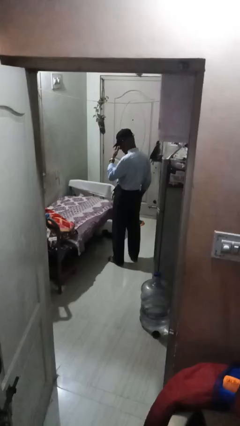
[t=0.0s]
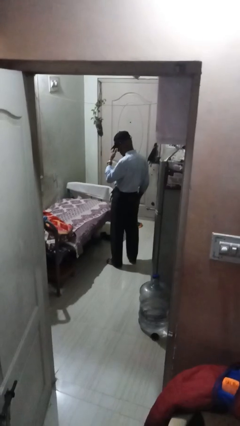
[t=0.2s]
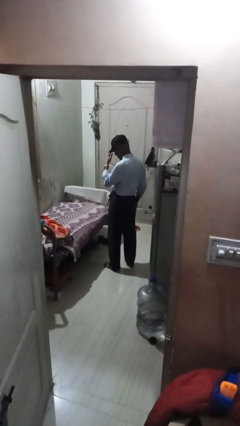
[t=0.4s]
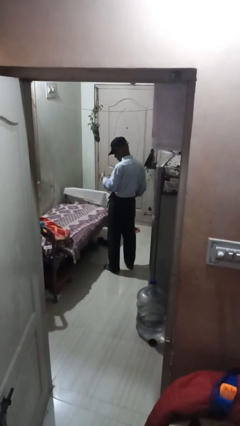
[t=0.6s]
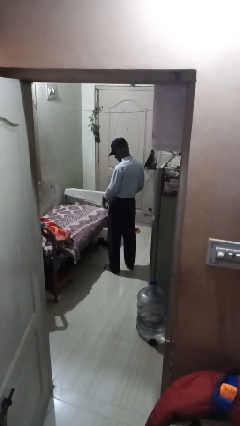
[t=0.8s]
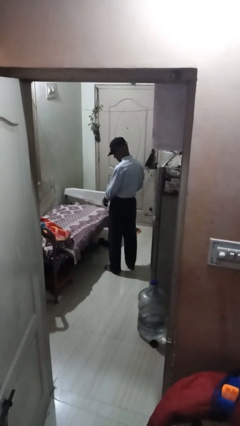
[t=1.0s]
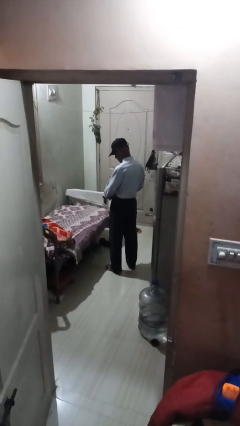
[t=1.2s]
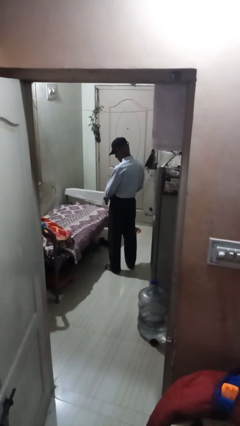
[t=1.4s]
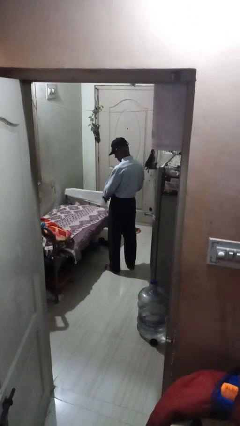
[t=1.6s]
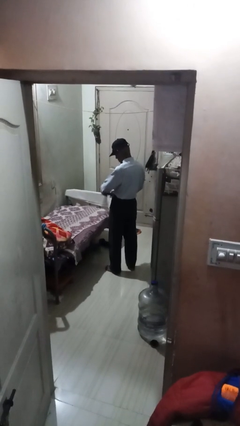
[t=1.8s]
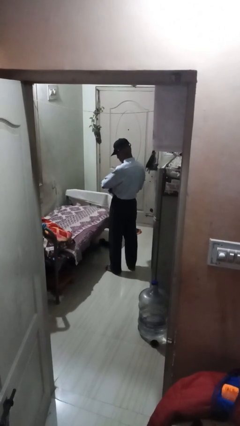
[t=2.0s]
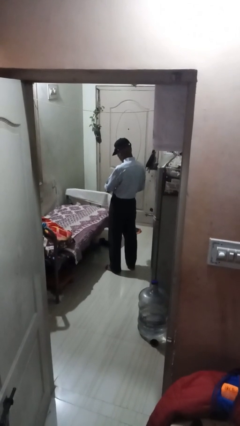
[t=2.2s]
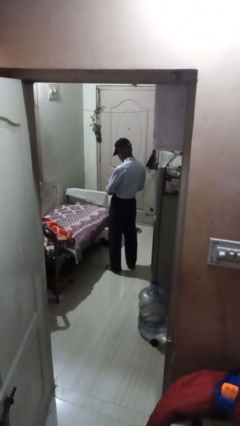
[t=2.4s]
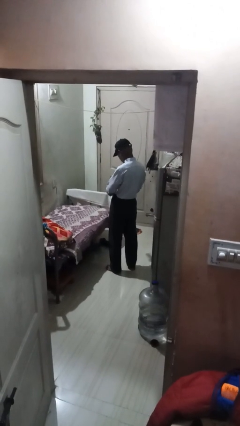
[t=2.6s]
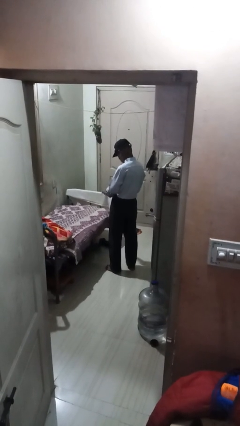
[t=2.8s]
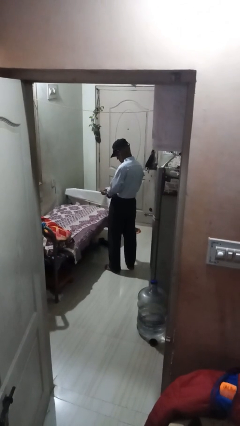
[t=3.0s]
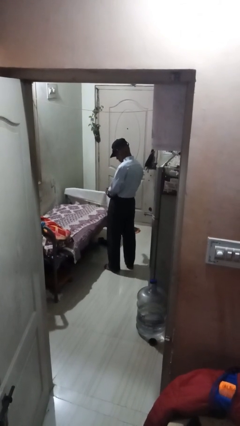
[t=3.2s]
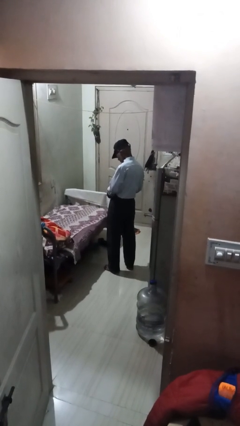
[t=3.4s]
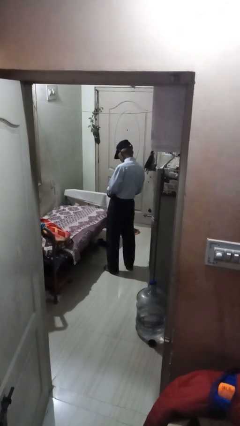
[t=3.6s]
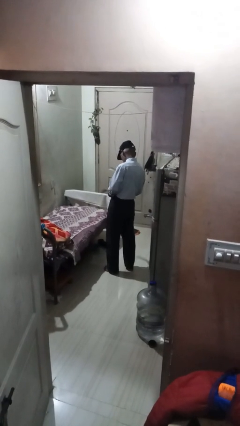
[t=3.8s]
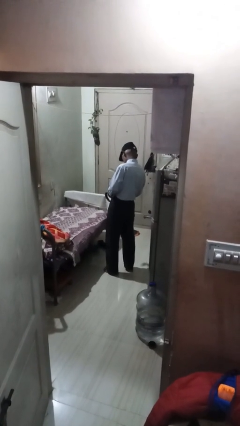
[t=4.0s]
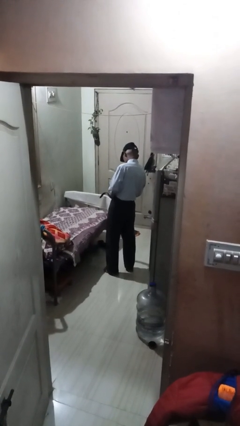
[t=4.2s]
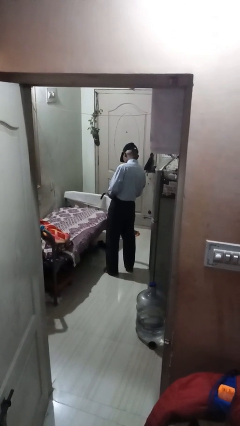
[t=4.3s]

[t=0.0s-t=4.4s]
person puts on belt

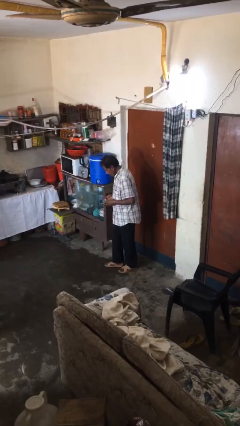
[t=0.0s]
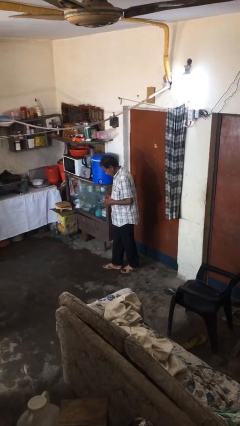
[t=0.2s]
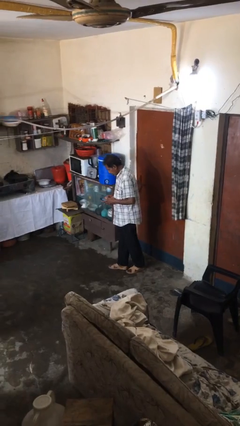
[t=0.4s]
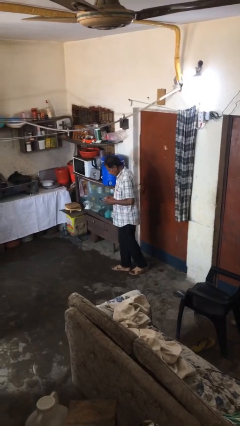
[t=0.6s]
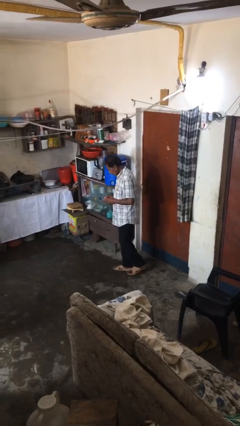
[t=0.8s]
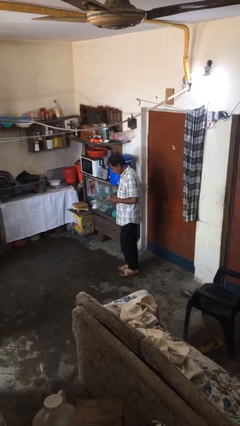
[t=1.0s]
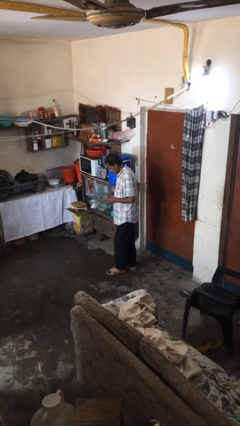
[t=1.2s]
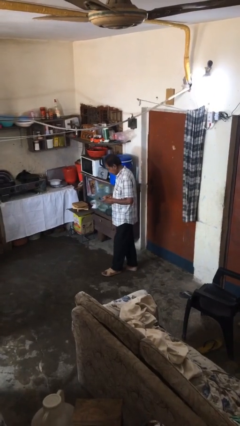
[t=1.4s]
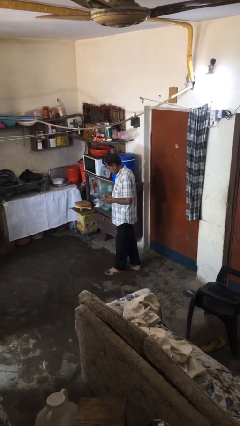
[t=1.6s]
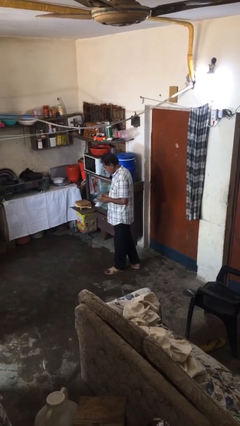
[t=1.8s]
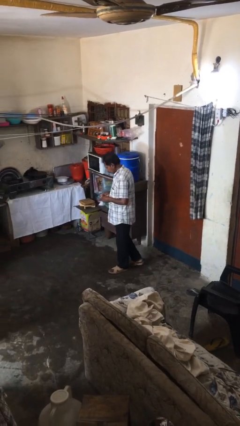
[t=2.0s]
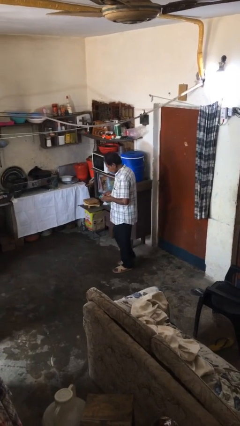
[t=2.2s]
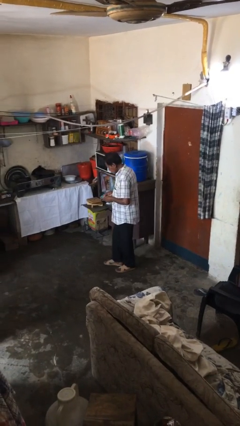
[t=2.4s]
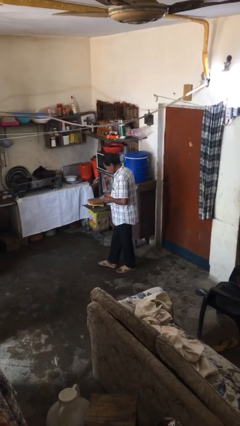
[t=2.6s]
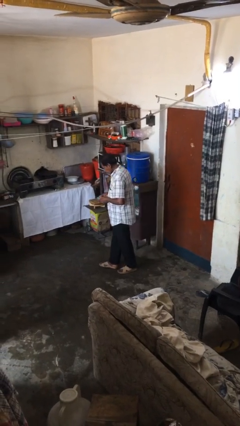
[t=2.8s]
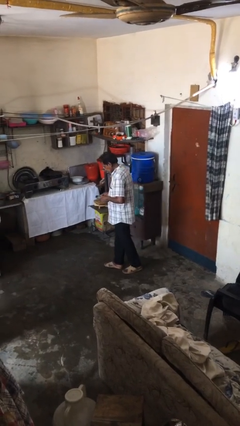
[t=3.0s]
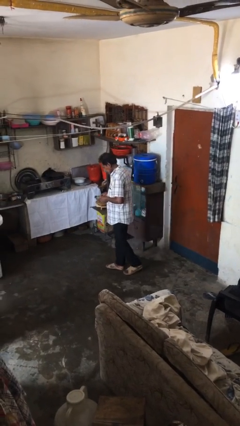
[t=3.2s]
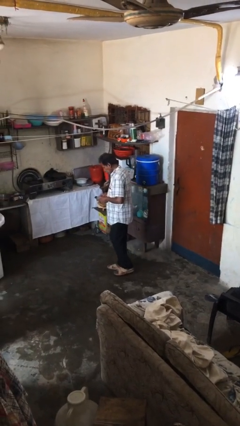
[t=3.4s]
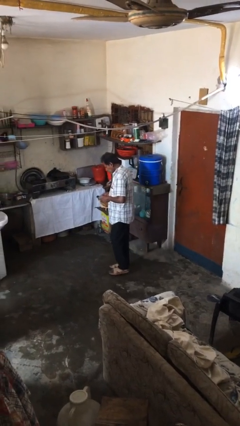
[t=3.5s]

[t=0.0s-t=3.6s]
person texts on phone

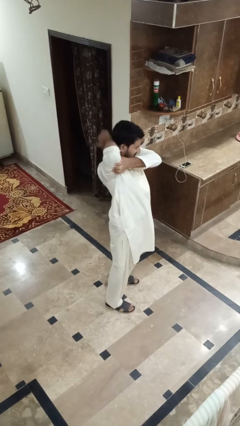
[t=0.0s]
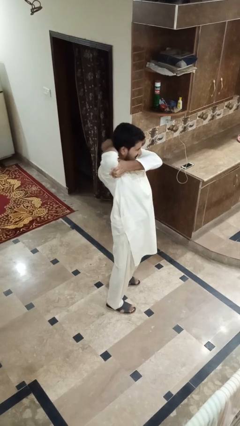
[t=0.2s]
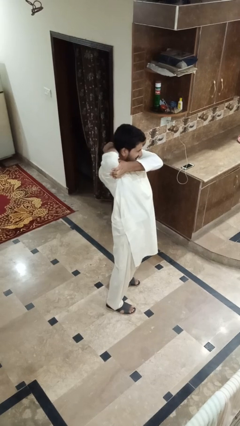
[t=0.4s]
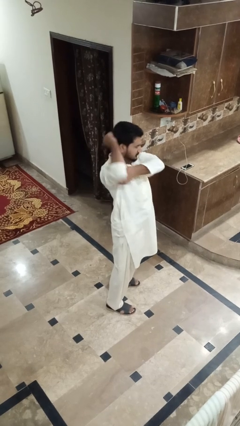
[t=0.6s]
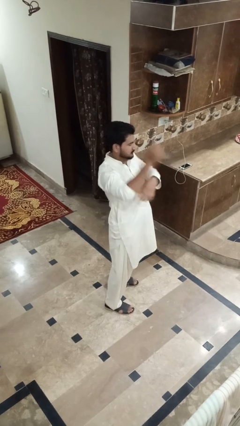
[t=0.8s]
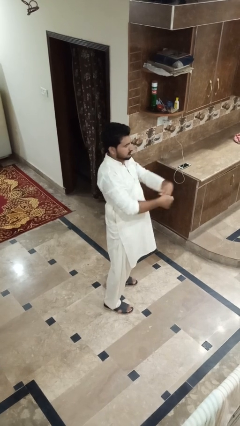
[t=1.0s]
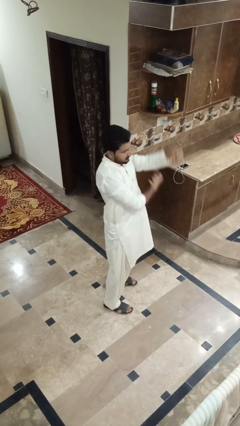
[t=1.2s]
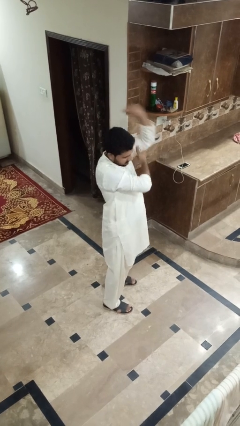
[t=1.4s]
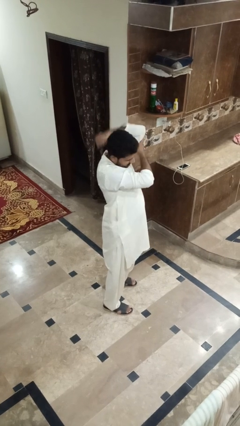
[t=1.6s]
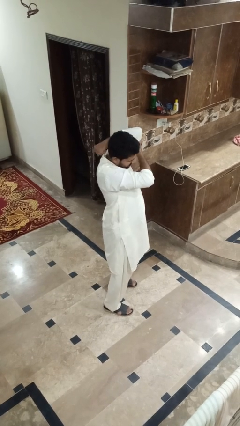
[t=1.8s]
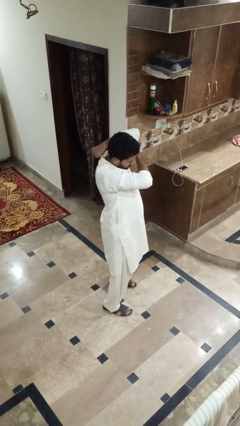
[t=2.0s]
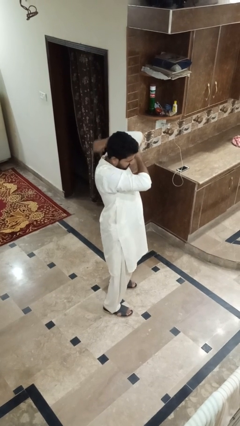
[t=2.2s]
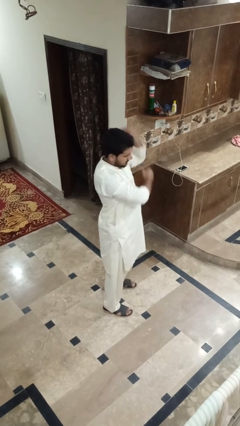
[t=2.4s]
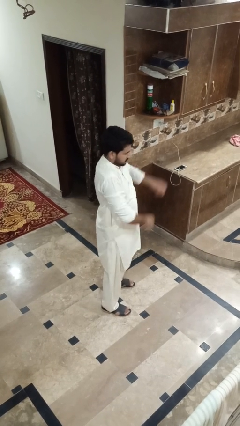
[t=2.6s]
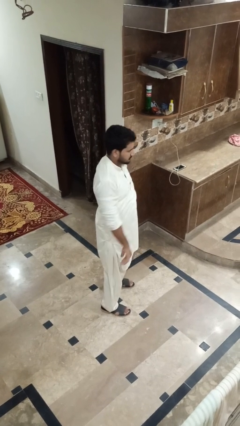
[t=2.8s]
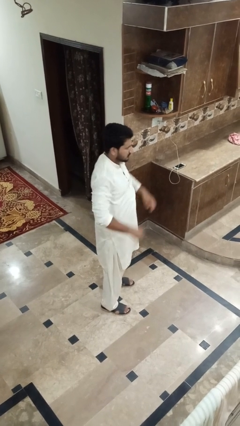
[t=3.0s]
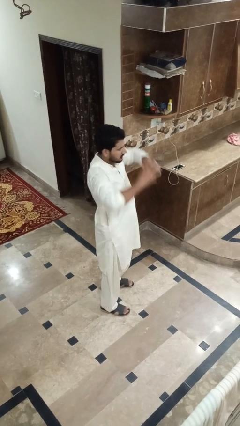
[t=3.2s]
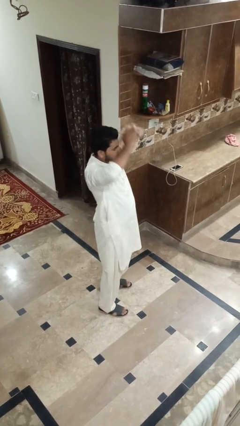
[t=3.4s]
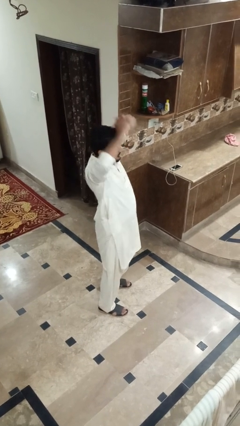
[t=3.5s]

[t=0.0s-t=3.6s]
person stretches arms to side

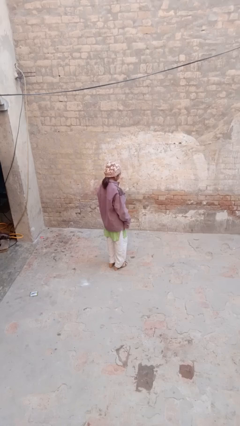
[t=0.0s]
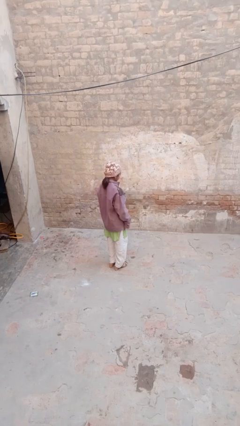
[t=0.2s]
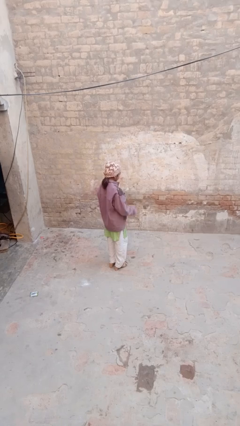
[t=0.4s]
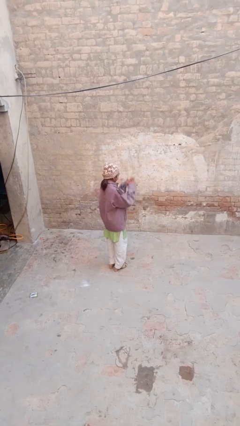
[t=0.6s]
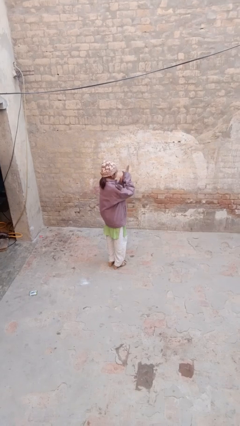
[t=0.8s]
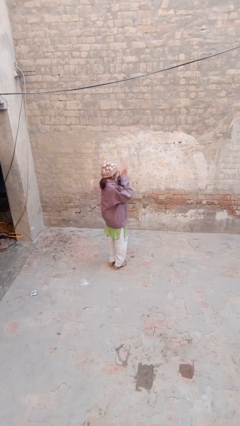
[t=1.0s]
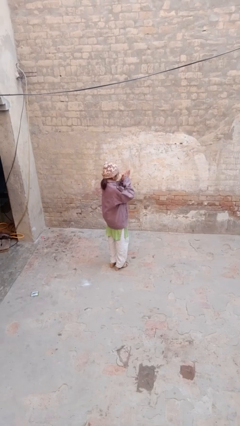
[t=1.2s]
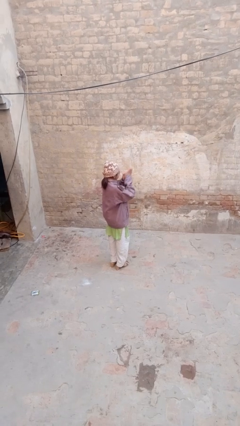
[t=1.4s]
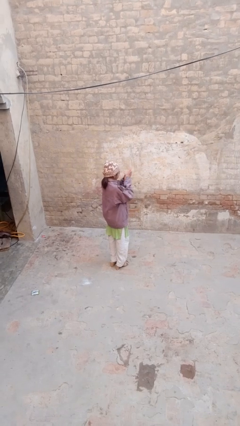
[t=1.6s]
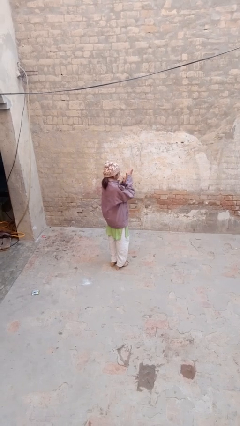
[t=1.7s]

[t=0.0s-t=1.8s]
person blows into hands

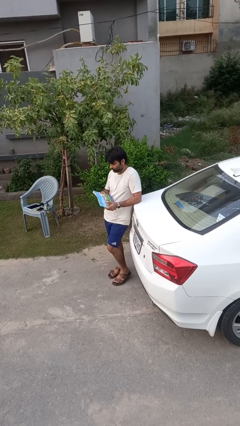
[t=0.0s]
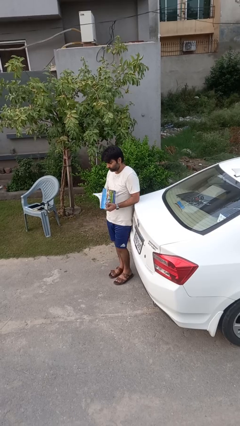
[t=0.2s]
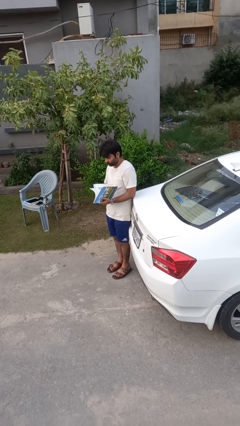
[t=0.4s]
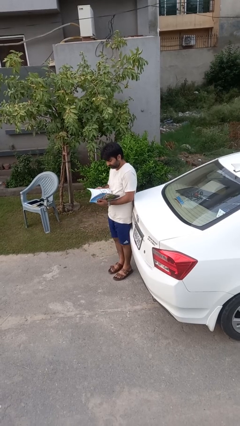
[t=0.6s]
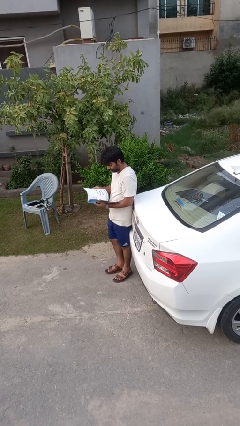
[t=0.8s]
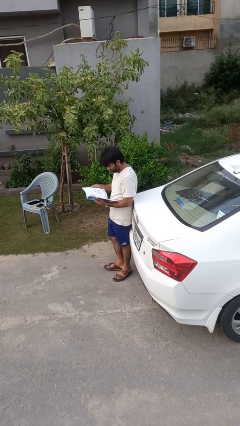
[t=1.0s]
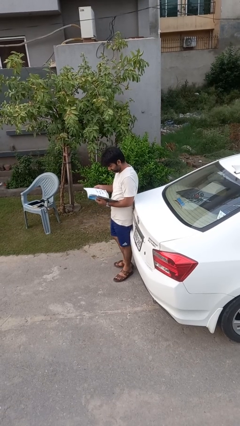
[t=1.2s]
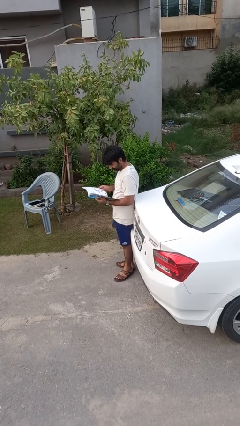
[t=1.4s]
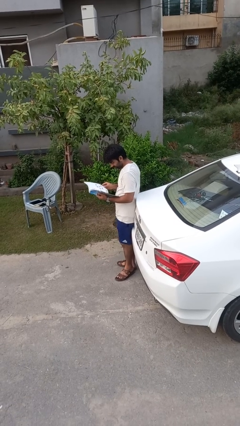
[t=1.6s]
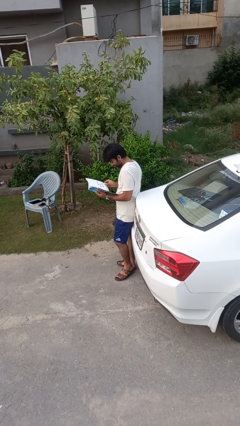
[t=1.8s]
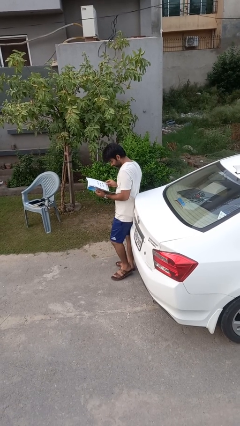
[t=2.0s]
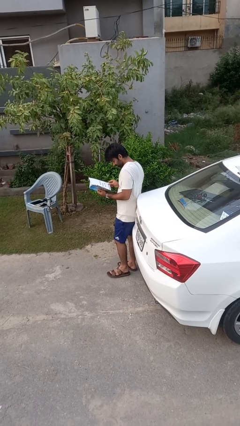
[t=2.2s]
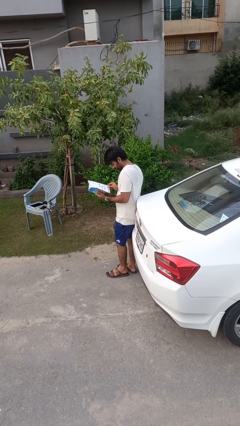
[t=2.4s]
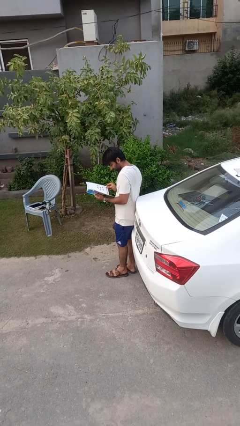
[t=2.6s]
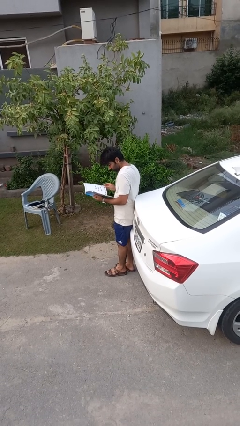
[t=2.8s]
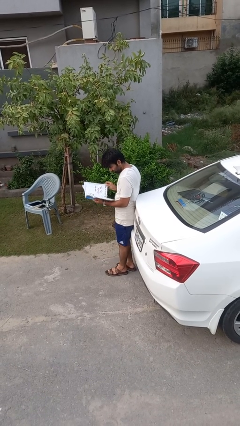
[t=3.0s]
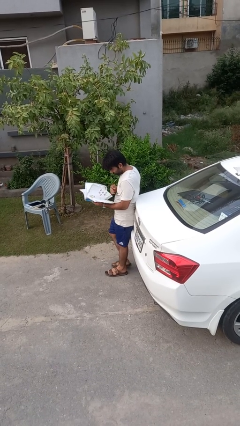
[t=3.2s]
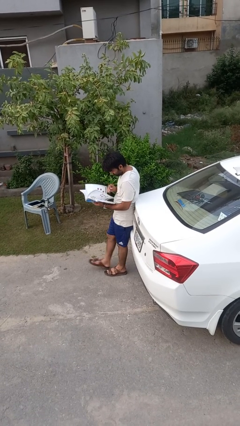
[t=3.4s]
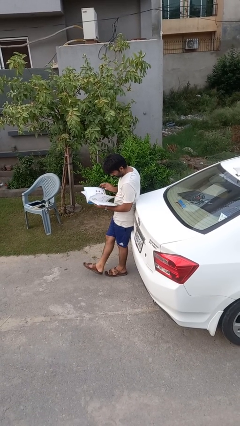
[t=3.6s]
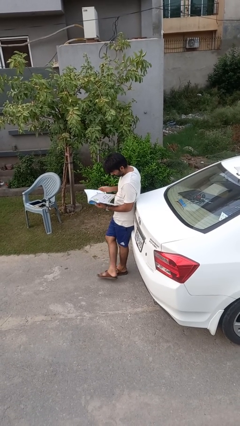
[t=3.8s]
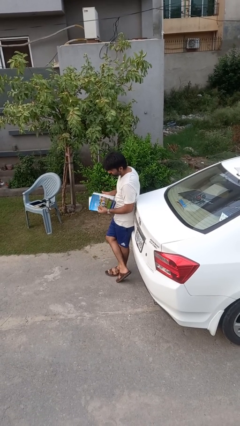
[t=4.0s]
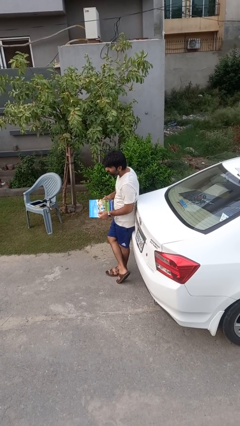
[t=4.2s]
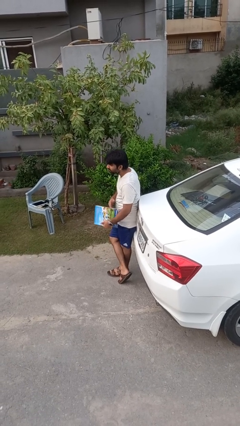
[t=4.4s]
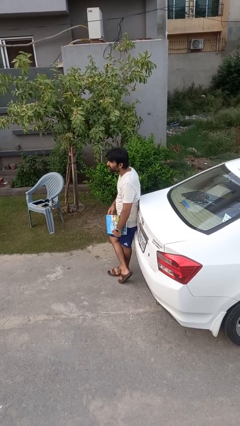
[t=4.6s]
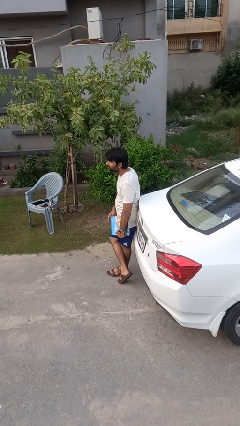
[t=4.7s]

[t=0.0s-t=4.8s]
person reads book
